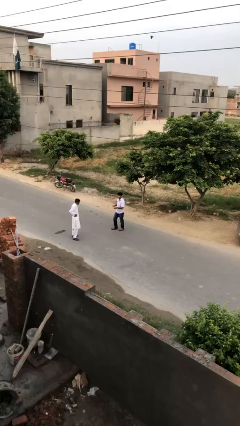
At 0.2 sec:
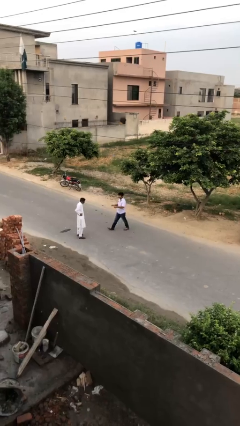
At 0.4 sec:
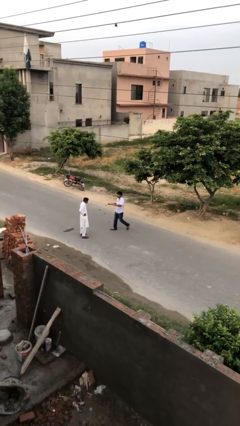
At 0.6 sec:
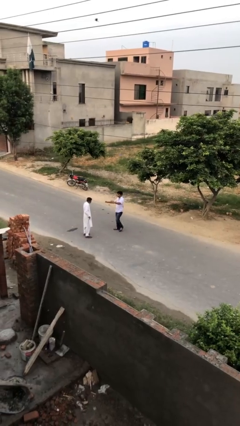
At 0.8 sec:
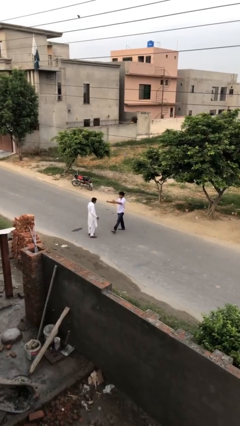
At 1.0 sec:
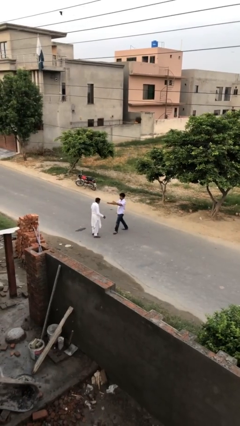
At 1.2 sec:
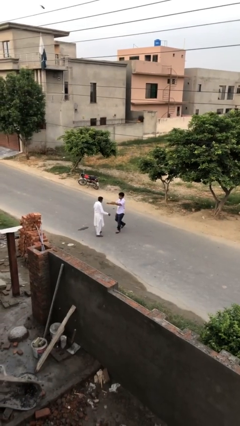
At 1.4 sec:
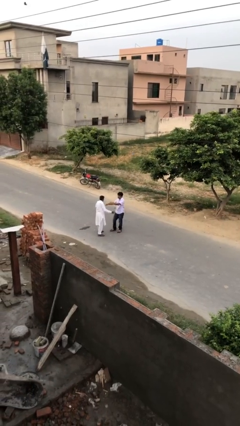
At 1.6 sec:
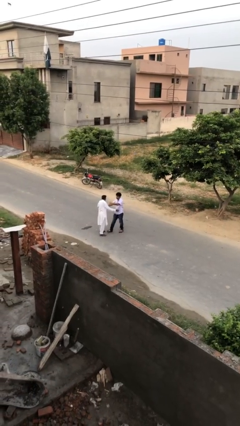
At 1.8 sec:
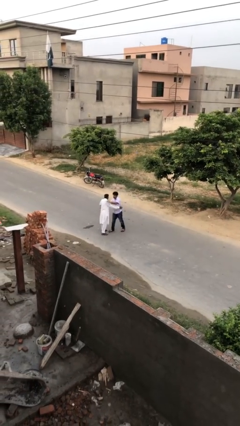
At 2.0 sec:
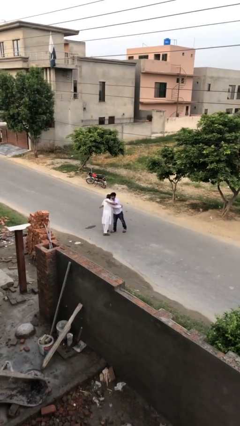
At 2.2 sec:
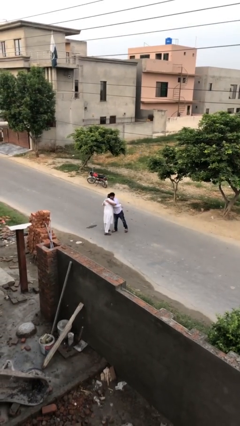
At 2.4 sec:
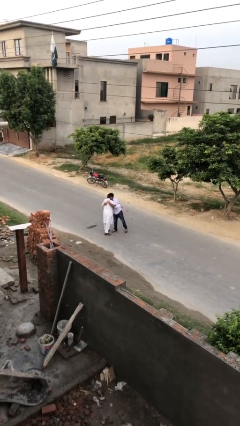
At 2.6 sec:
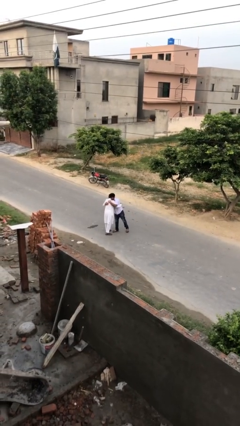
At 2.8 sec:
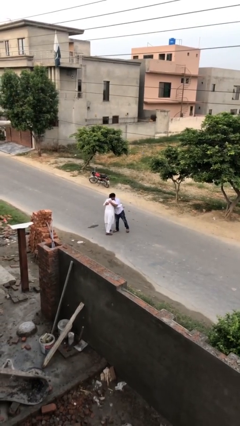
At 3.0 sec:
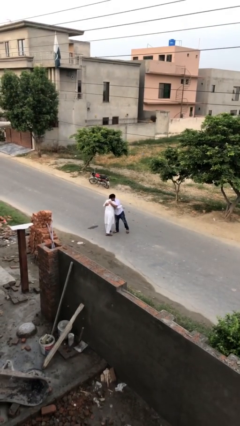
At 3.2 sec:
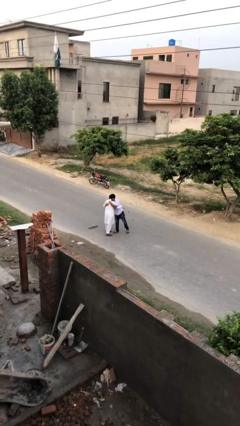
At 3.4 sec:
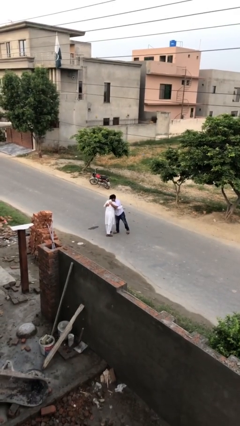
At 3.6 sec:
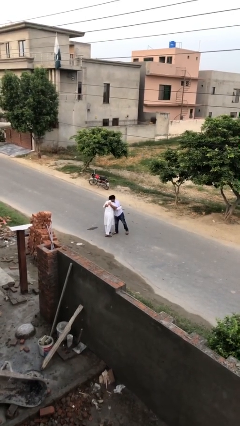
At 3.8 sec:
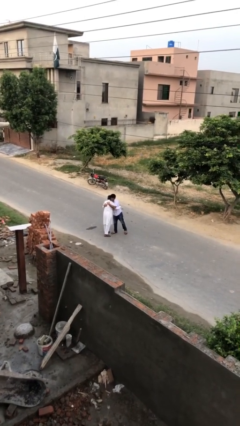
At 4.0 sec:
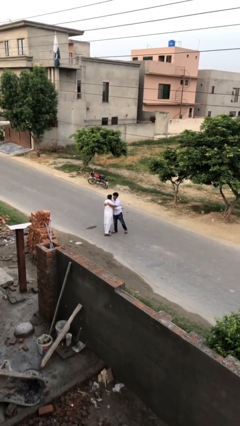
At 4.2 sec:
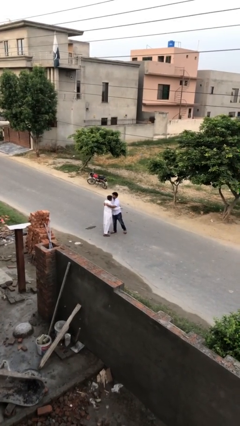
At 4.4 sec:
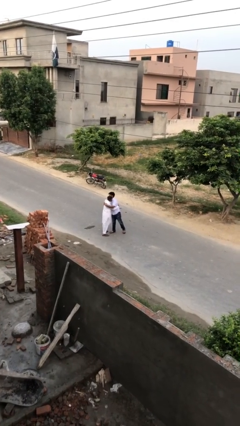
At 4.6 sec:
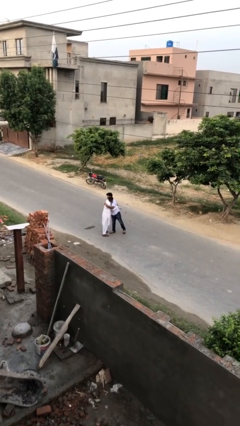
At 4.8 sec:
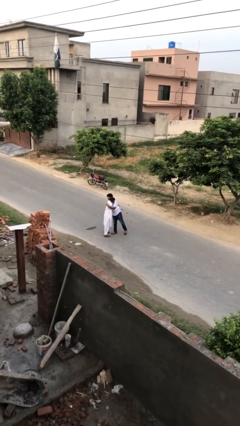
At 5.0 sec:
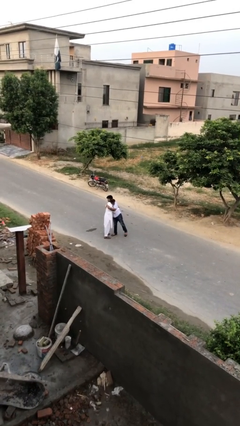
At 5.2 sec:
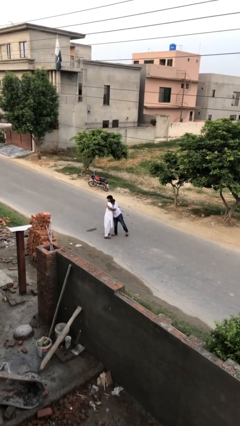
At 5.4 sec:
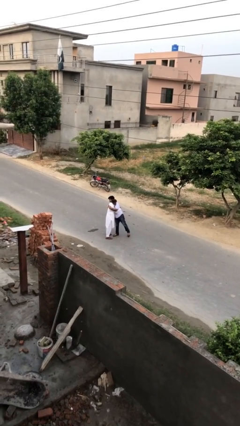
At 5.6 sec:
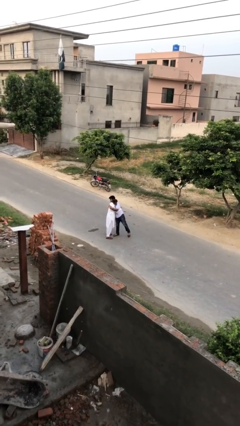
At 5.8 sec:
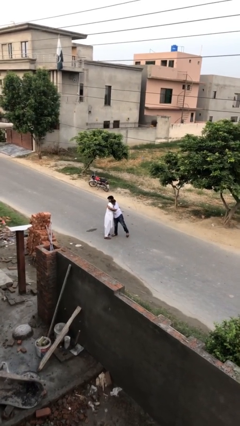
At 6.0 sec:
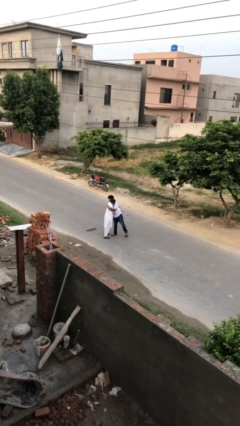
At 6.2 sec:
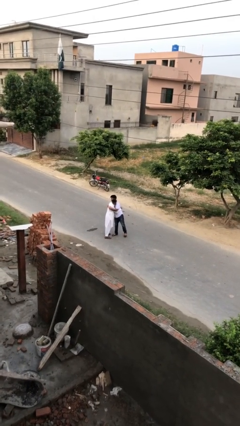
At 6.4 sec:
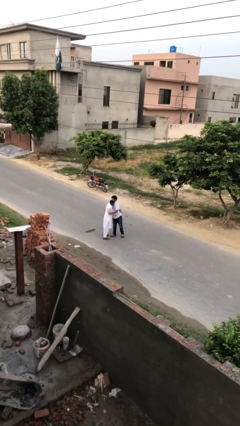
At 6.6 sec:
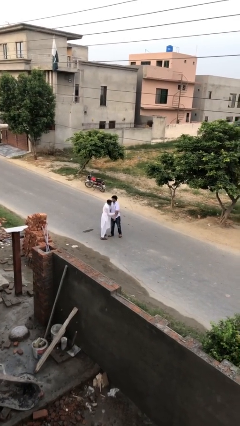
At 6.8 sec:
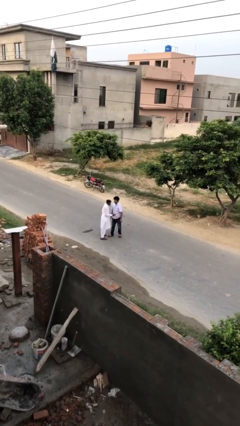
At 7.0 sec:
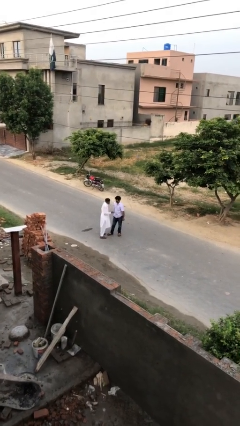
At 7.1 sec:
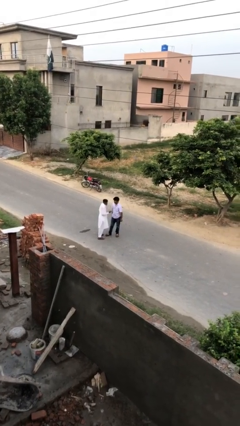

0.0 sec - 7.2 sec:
person embraces person

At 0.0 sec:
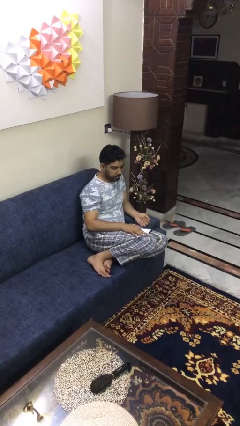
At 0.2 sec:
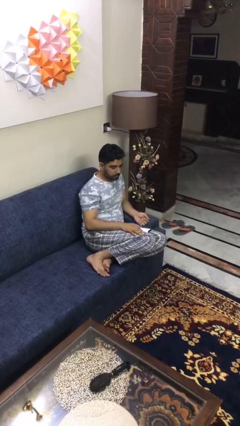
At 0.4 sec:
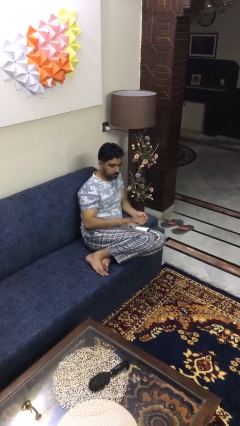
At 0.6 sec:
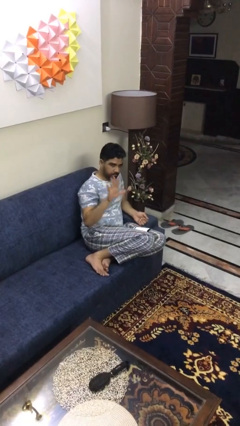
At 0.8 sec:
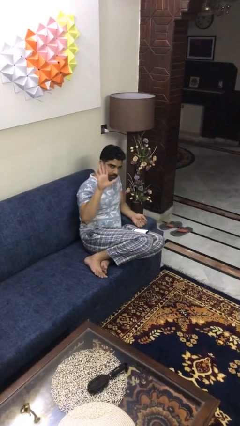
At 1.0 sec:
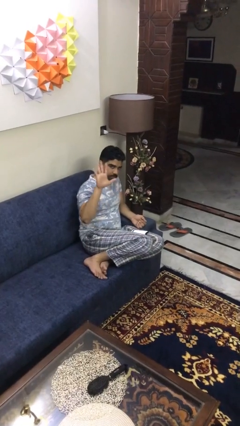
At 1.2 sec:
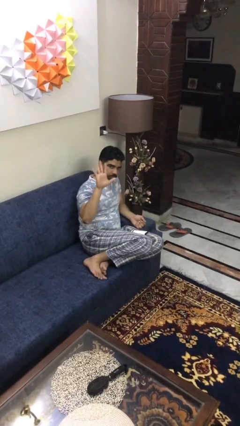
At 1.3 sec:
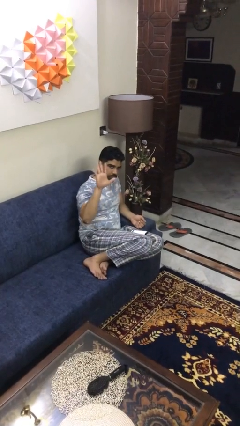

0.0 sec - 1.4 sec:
person gestures number five

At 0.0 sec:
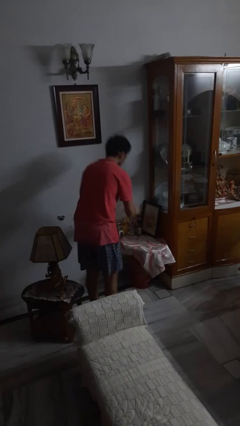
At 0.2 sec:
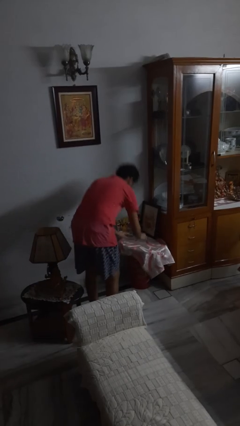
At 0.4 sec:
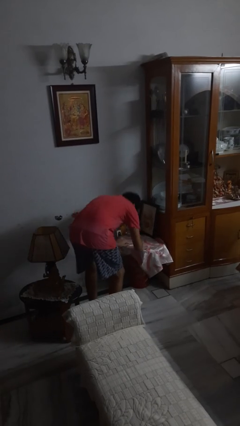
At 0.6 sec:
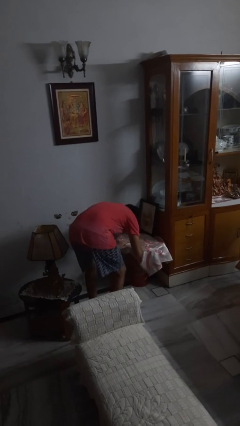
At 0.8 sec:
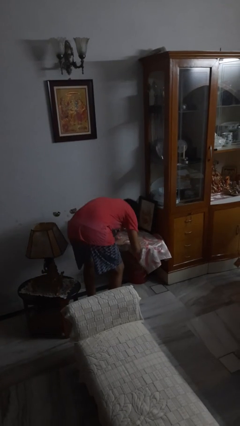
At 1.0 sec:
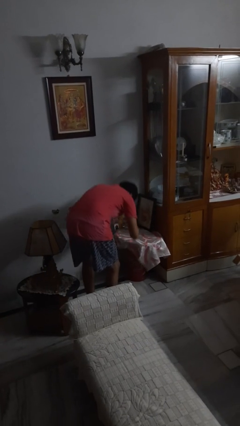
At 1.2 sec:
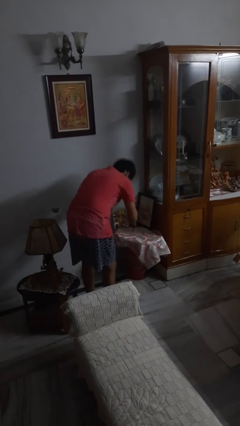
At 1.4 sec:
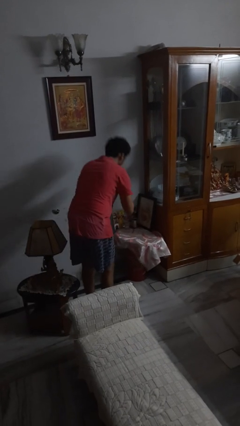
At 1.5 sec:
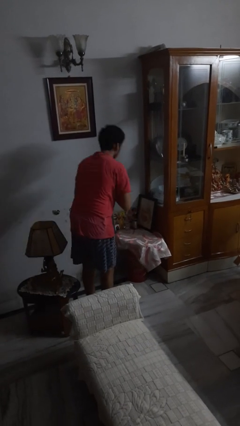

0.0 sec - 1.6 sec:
person prays

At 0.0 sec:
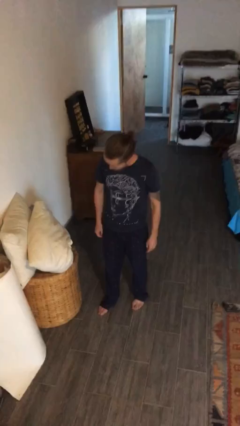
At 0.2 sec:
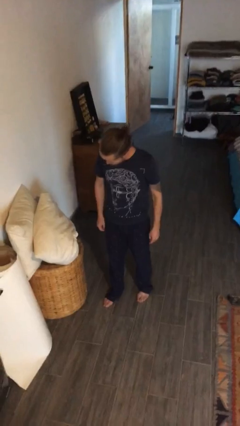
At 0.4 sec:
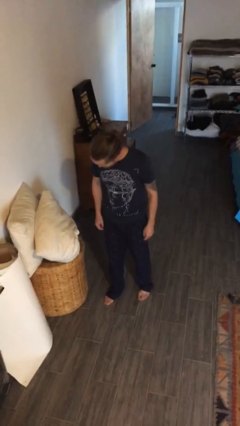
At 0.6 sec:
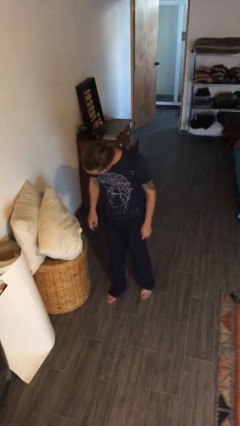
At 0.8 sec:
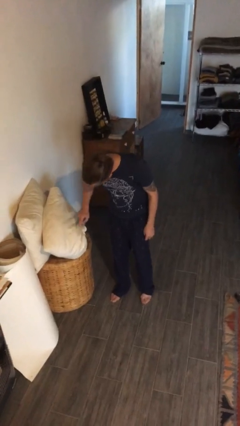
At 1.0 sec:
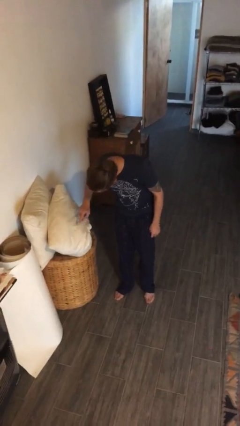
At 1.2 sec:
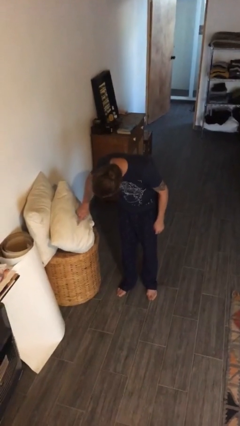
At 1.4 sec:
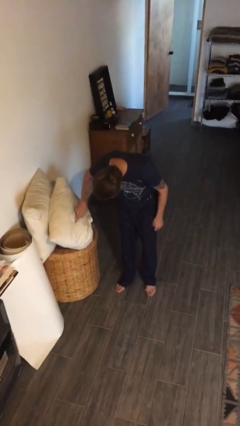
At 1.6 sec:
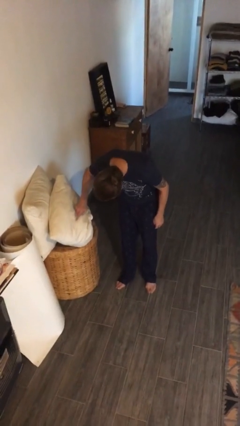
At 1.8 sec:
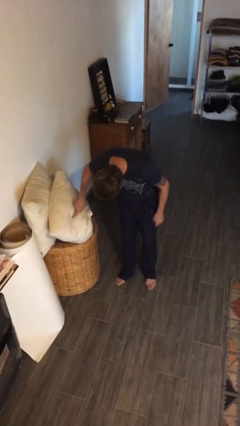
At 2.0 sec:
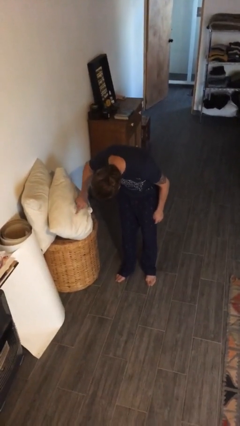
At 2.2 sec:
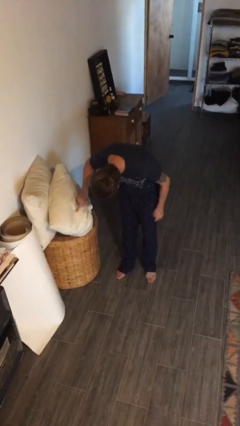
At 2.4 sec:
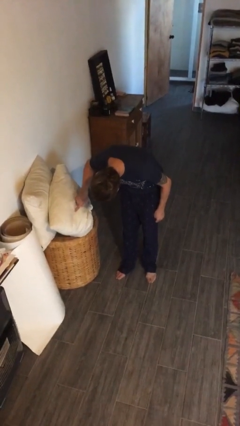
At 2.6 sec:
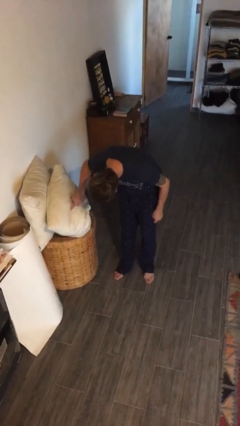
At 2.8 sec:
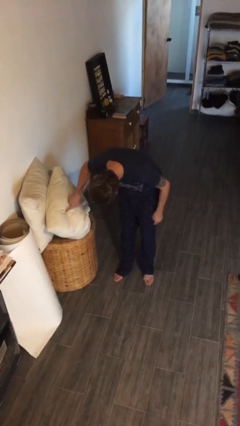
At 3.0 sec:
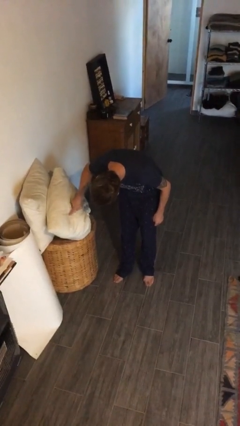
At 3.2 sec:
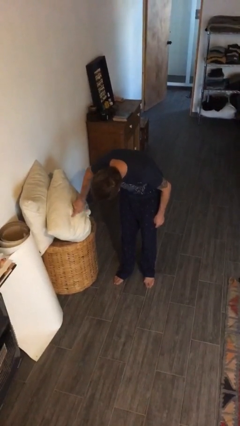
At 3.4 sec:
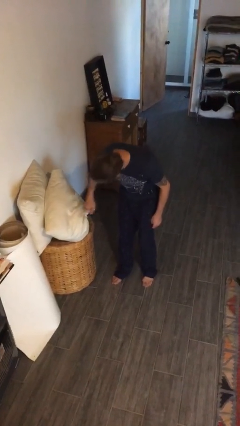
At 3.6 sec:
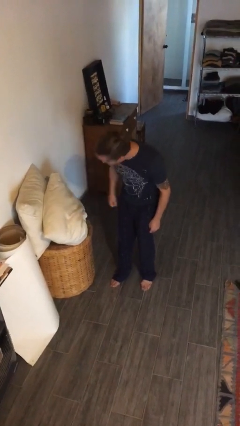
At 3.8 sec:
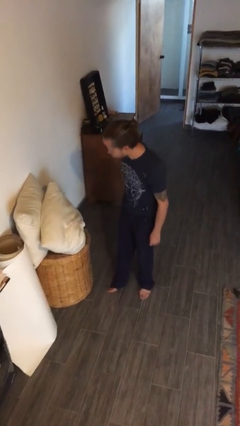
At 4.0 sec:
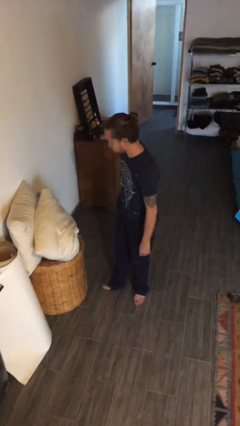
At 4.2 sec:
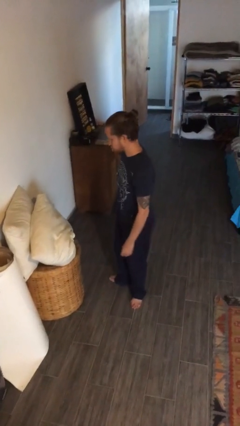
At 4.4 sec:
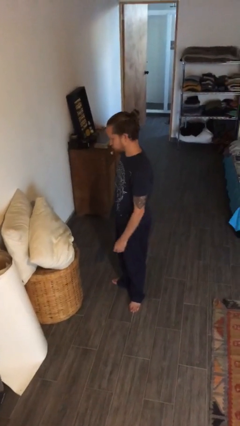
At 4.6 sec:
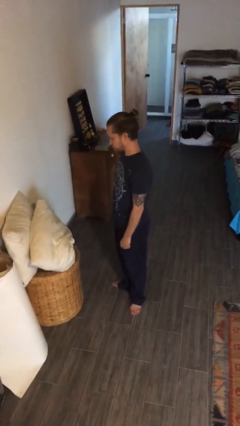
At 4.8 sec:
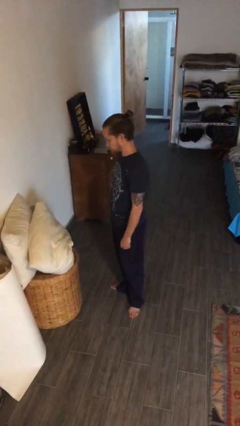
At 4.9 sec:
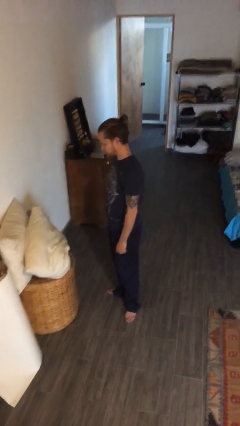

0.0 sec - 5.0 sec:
person taps object with finger

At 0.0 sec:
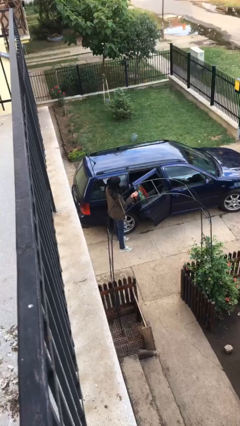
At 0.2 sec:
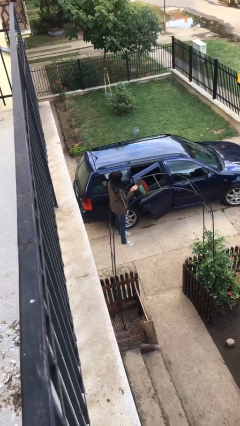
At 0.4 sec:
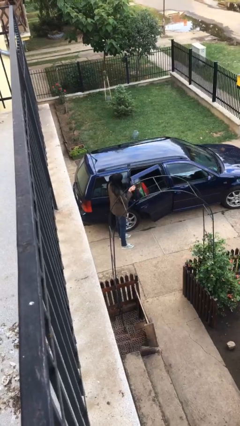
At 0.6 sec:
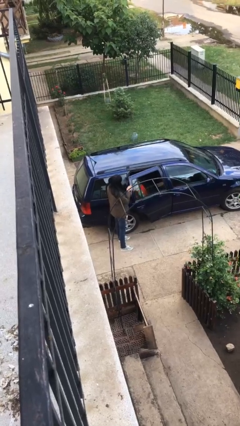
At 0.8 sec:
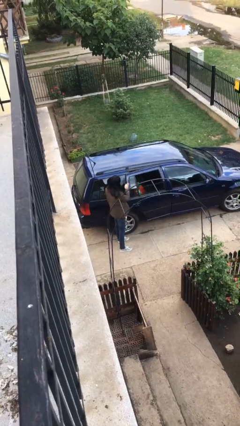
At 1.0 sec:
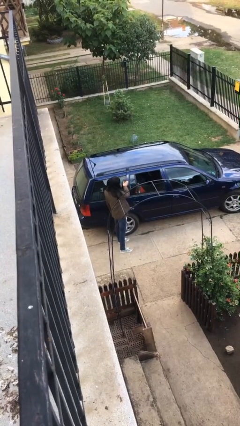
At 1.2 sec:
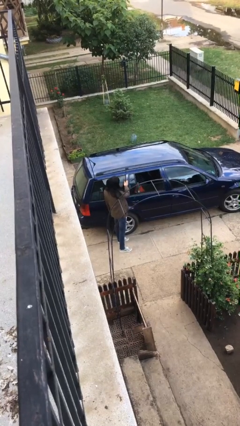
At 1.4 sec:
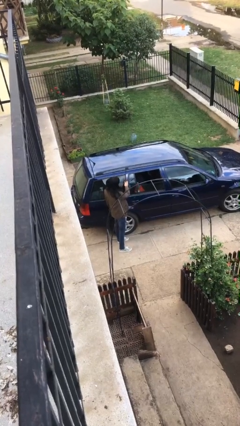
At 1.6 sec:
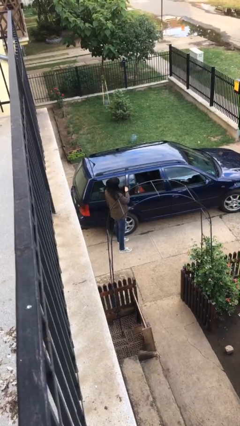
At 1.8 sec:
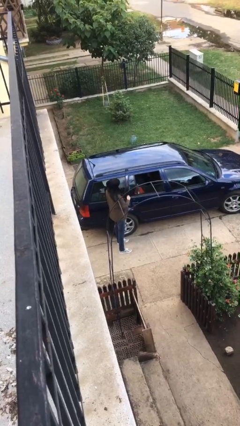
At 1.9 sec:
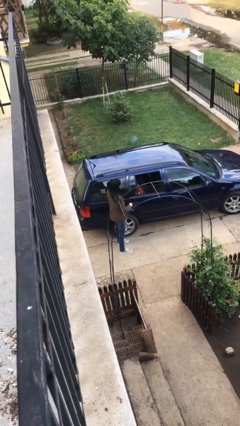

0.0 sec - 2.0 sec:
person closes car door

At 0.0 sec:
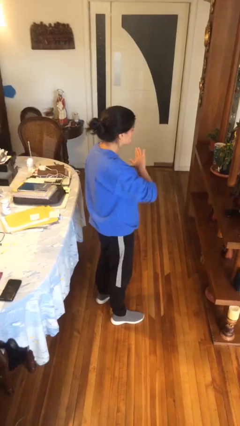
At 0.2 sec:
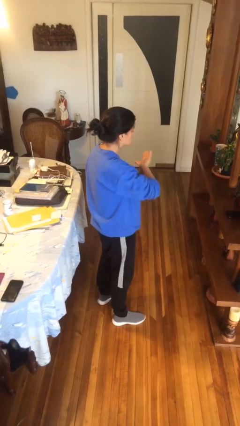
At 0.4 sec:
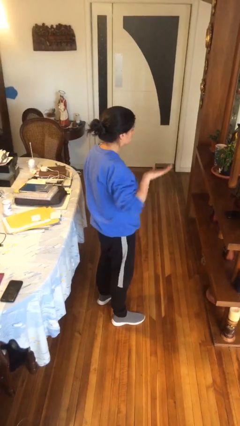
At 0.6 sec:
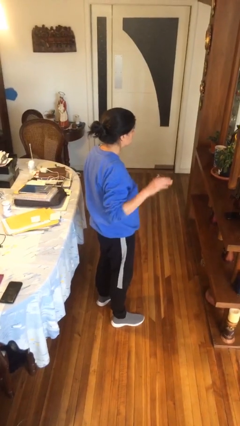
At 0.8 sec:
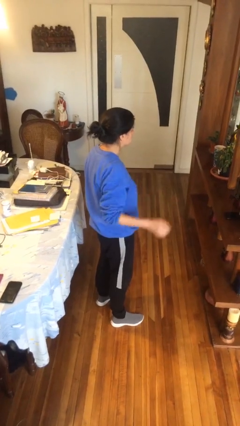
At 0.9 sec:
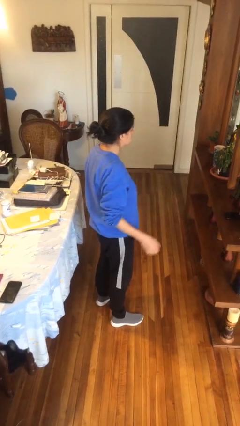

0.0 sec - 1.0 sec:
person gestures swipe right
